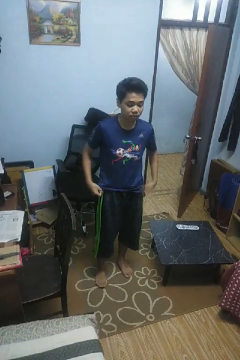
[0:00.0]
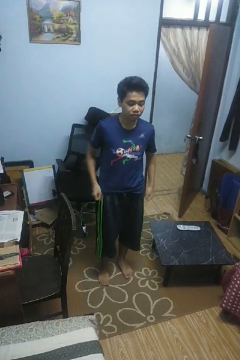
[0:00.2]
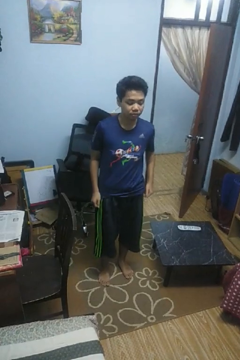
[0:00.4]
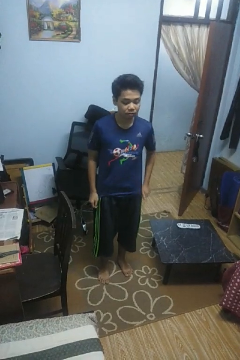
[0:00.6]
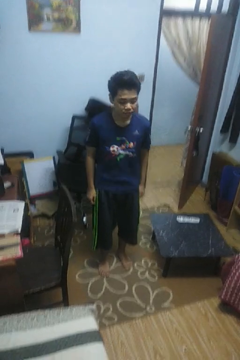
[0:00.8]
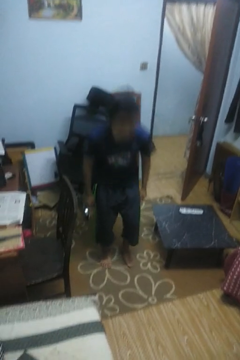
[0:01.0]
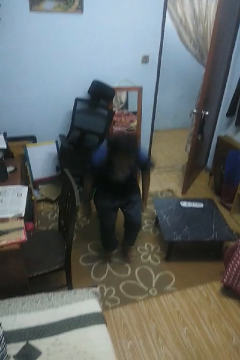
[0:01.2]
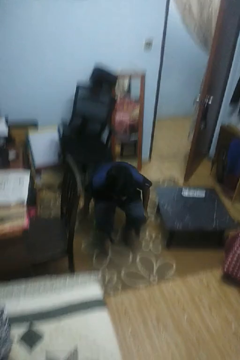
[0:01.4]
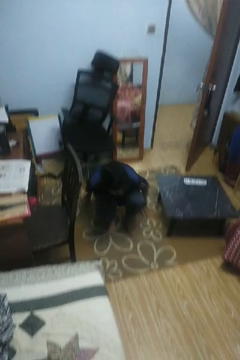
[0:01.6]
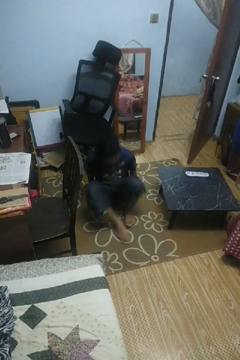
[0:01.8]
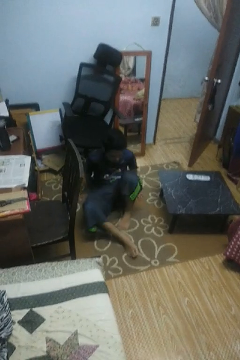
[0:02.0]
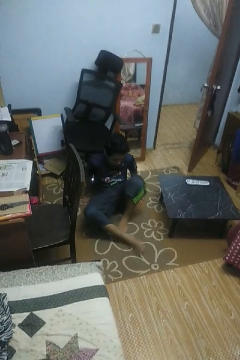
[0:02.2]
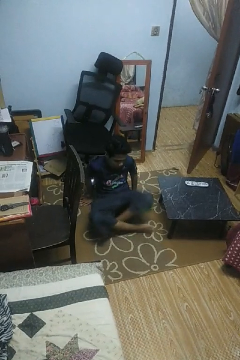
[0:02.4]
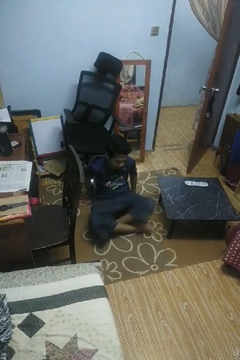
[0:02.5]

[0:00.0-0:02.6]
person sits crisscross

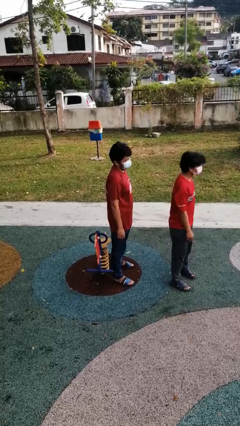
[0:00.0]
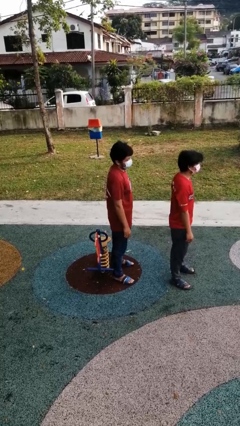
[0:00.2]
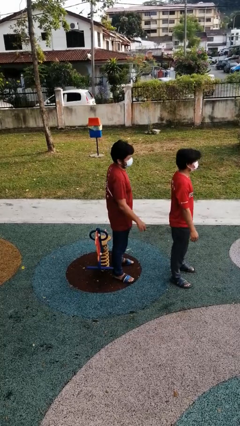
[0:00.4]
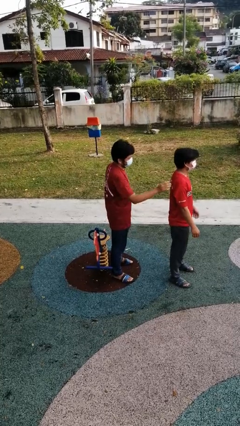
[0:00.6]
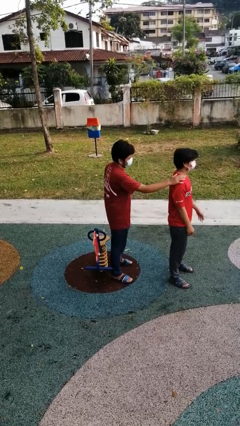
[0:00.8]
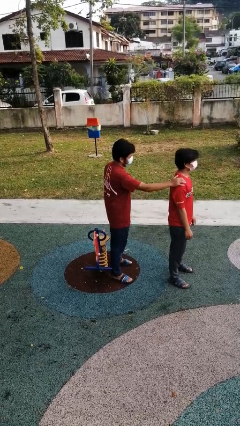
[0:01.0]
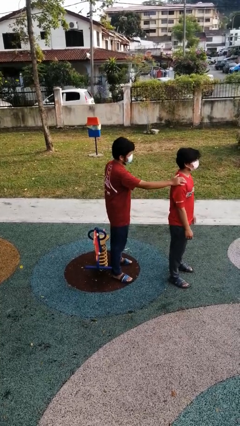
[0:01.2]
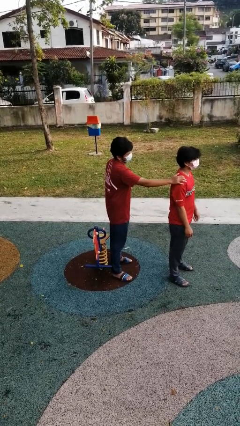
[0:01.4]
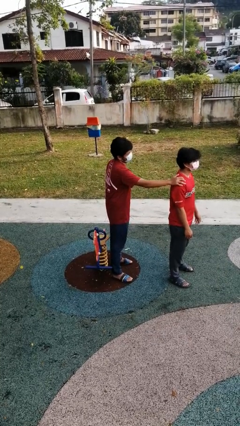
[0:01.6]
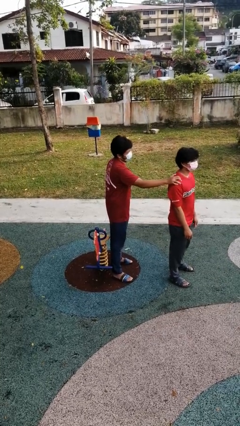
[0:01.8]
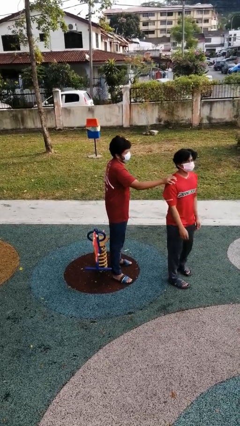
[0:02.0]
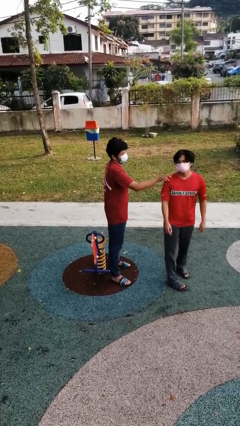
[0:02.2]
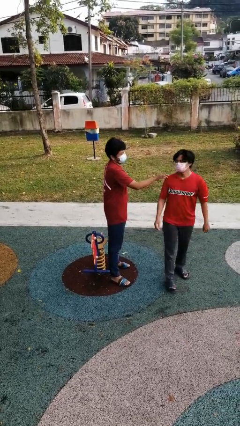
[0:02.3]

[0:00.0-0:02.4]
person grabs person by shoulder

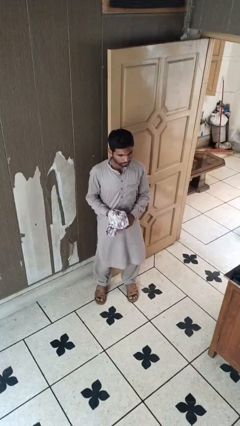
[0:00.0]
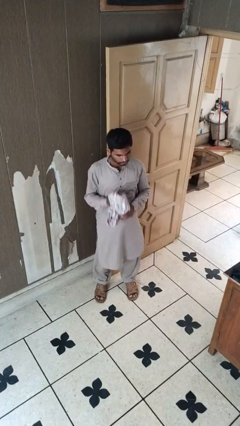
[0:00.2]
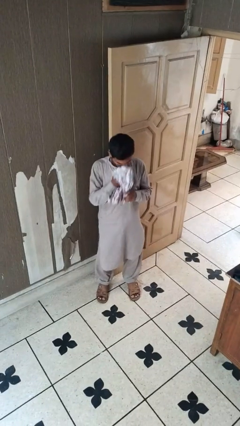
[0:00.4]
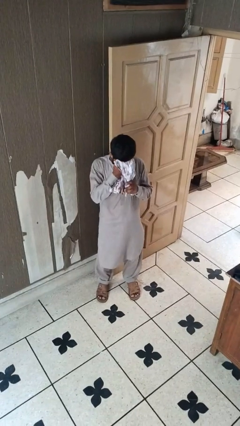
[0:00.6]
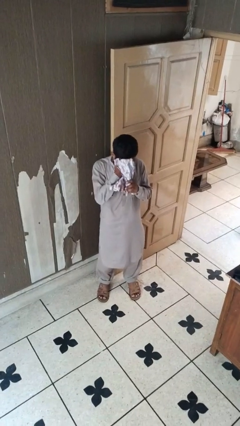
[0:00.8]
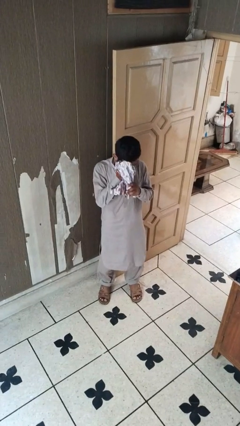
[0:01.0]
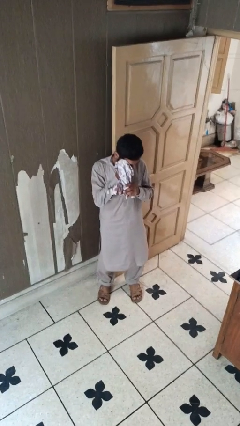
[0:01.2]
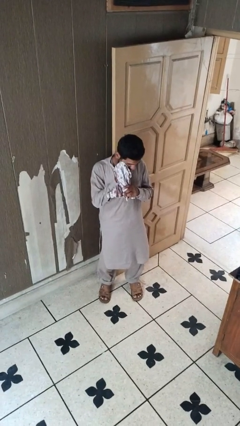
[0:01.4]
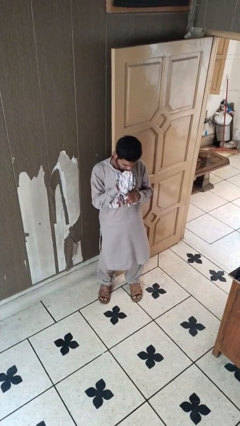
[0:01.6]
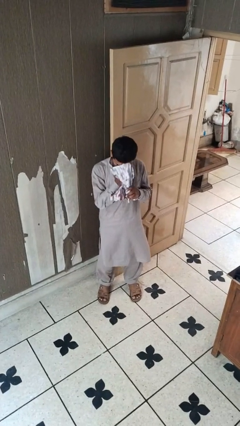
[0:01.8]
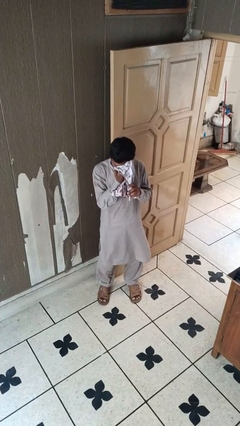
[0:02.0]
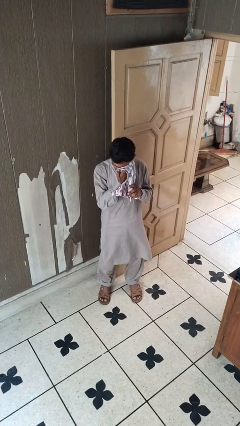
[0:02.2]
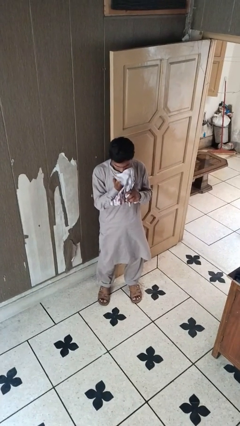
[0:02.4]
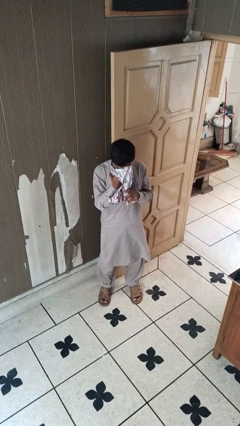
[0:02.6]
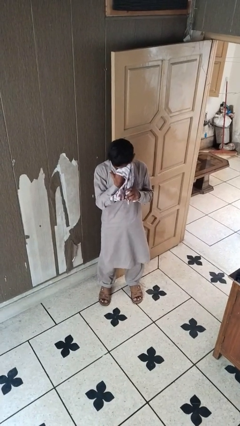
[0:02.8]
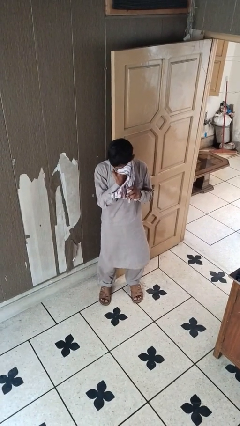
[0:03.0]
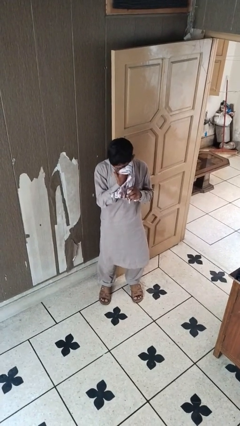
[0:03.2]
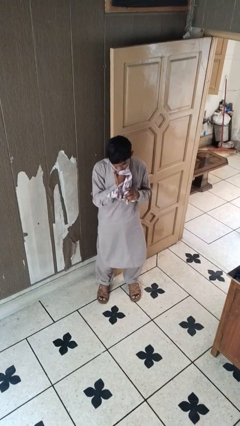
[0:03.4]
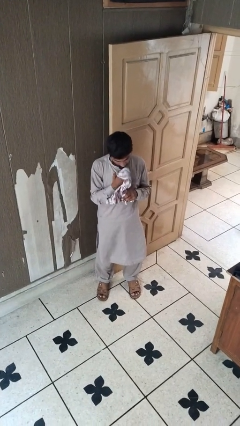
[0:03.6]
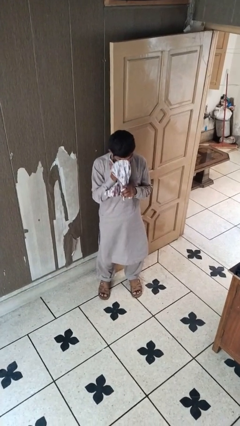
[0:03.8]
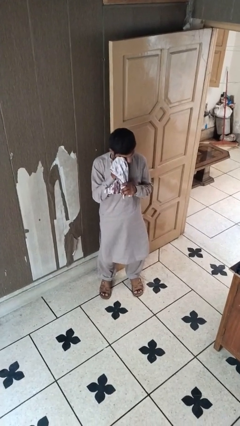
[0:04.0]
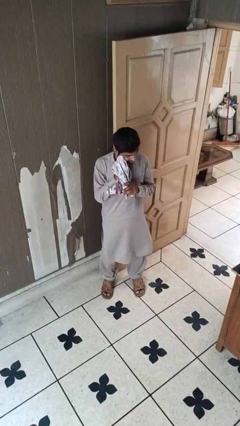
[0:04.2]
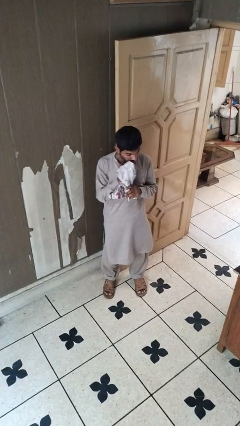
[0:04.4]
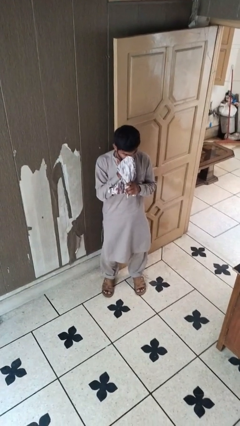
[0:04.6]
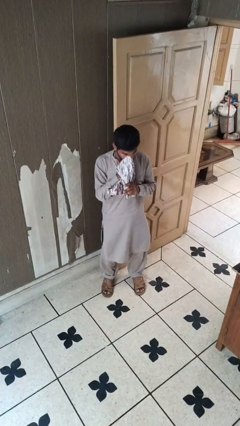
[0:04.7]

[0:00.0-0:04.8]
person wipes mouth with napkin

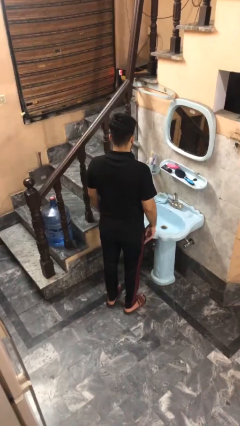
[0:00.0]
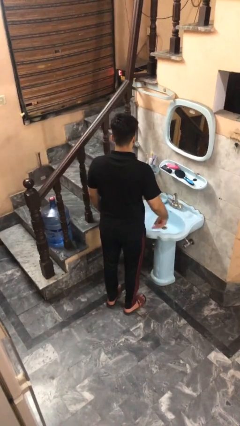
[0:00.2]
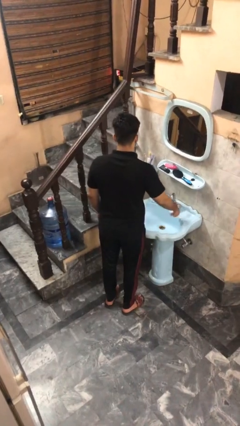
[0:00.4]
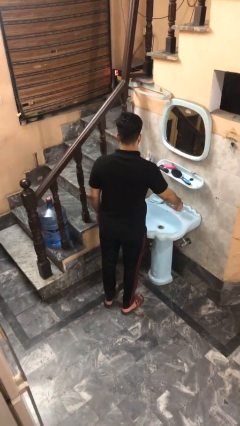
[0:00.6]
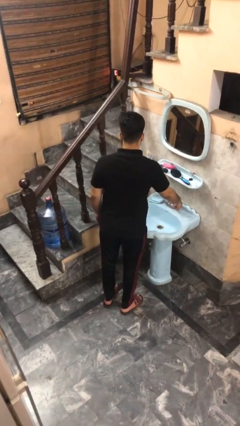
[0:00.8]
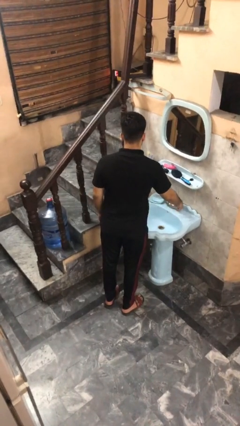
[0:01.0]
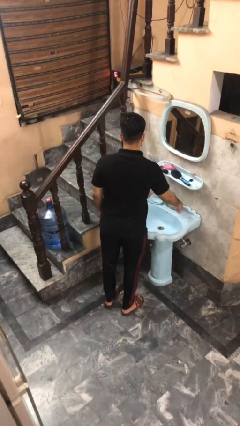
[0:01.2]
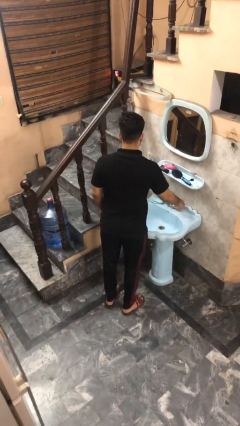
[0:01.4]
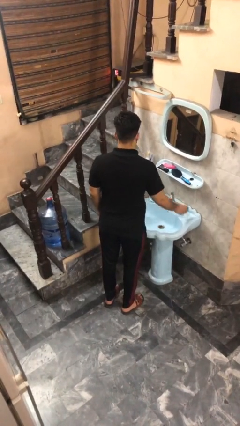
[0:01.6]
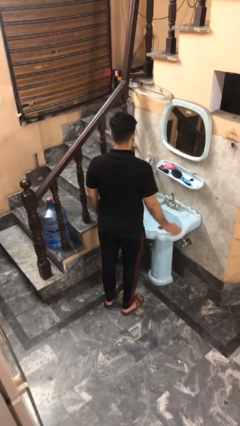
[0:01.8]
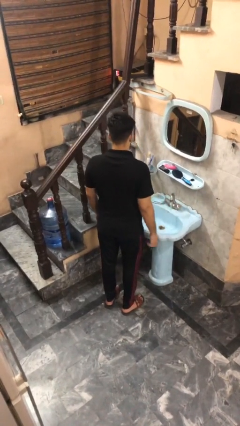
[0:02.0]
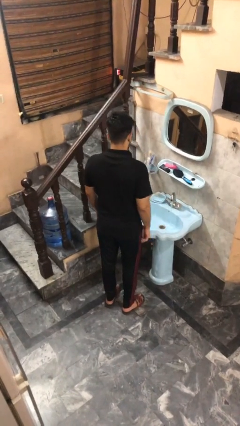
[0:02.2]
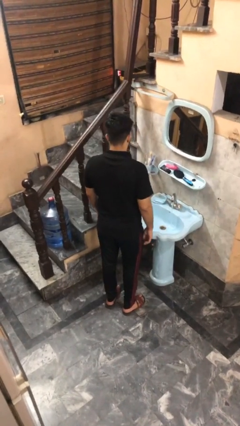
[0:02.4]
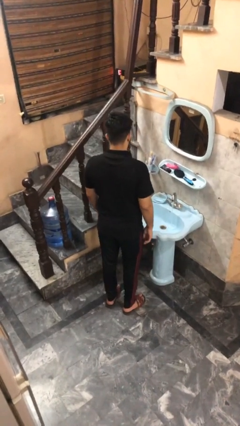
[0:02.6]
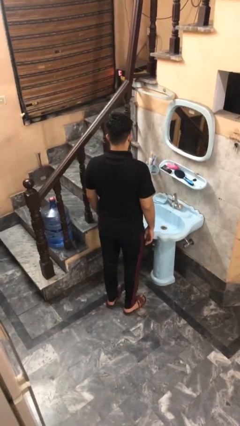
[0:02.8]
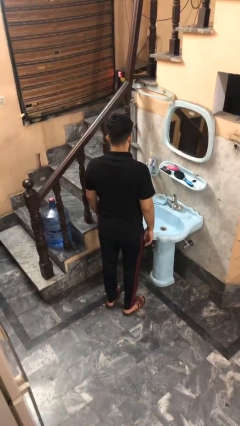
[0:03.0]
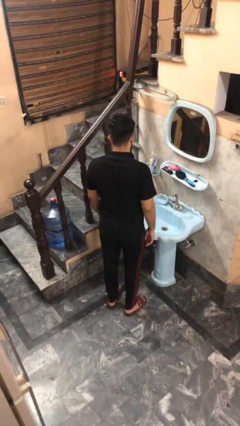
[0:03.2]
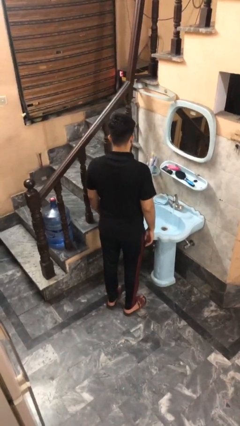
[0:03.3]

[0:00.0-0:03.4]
person turns on faucet

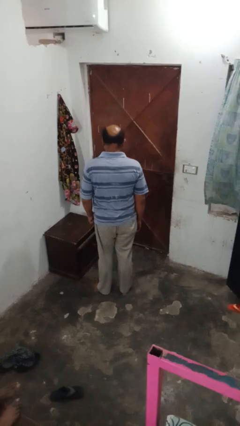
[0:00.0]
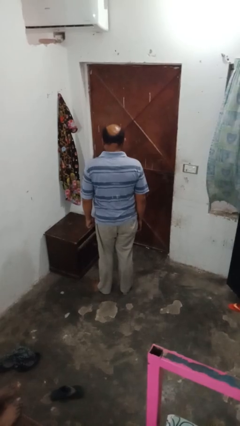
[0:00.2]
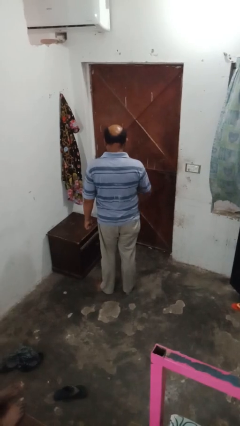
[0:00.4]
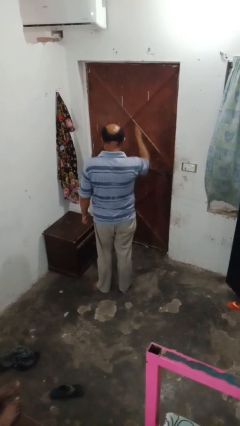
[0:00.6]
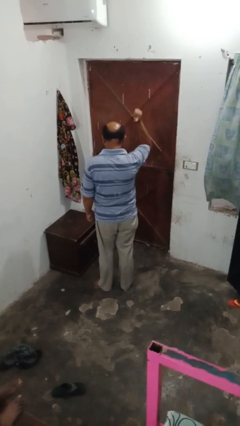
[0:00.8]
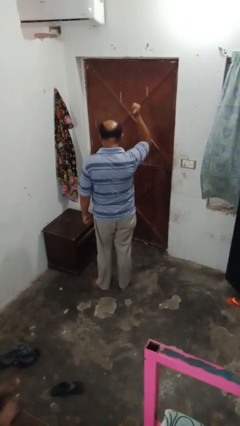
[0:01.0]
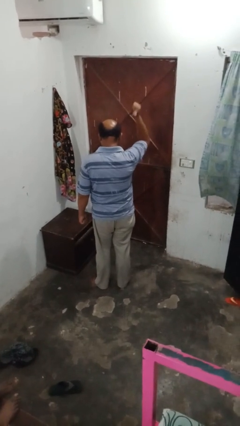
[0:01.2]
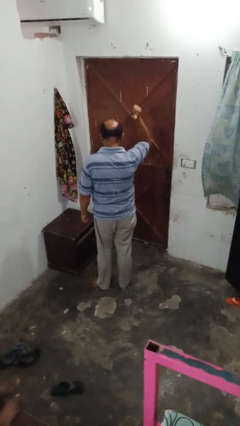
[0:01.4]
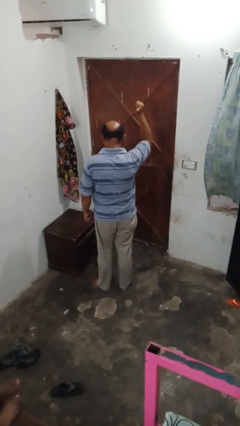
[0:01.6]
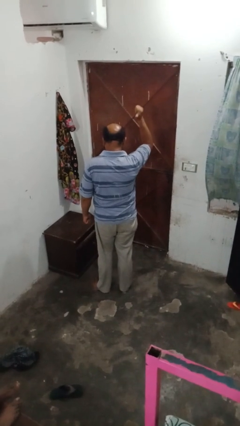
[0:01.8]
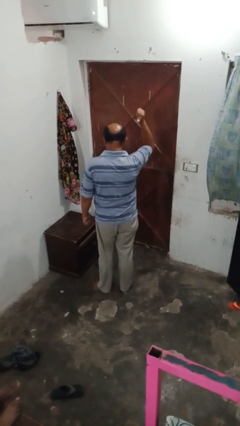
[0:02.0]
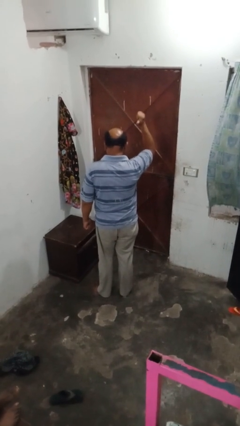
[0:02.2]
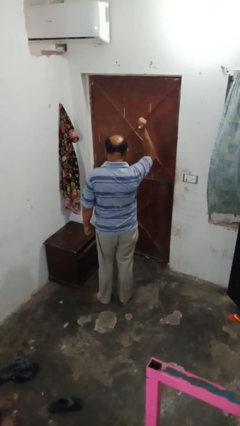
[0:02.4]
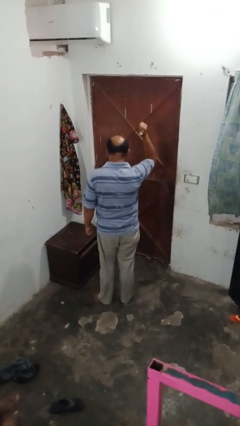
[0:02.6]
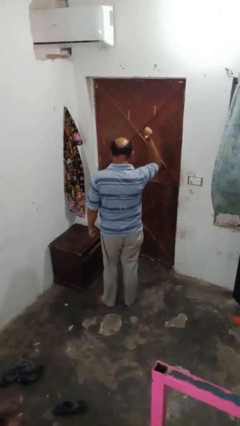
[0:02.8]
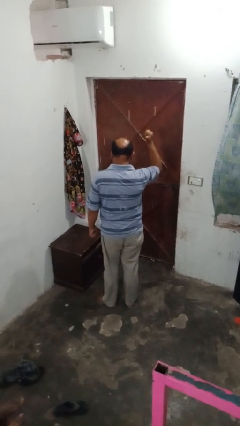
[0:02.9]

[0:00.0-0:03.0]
person gestures behind me

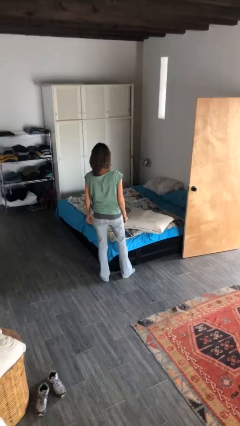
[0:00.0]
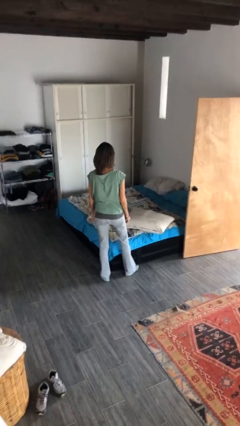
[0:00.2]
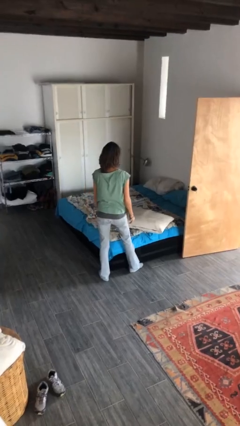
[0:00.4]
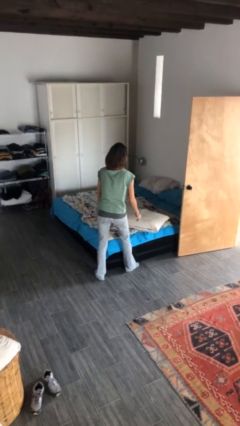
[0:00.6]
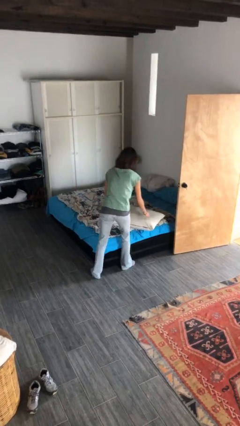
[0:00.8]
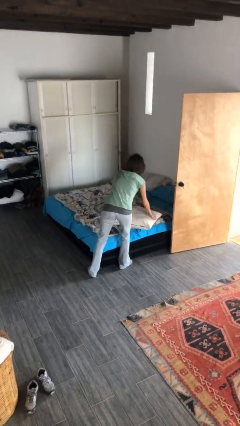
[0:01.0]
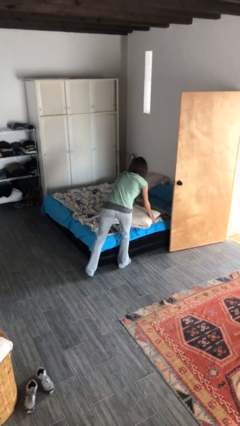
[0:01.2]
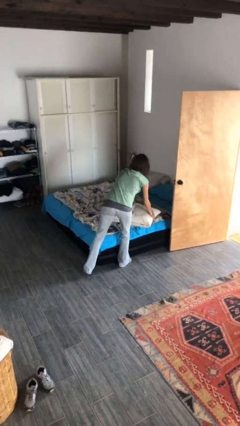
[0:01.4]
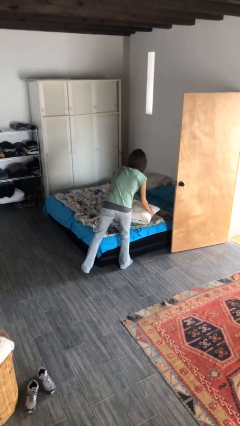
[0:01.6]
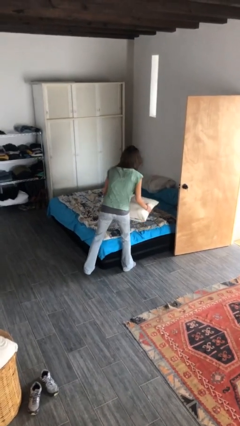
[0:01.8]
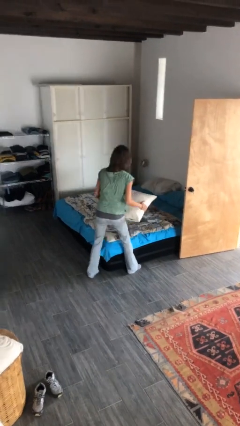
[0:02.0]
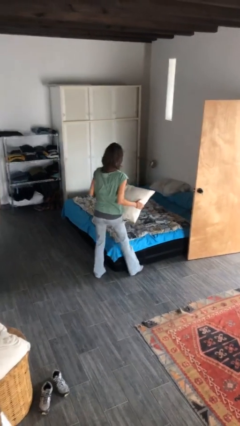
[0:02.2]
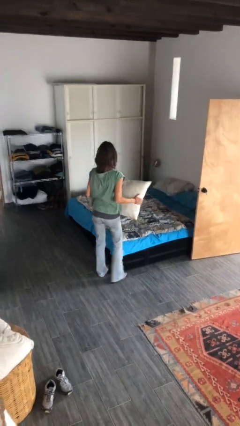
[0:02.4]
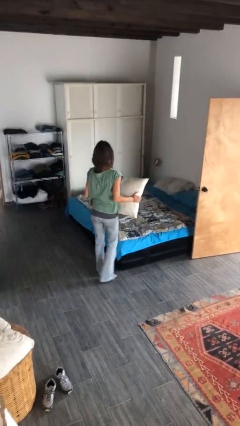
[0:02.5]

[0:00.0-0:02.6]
person picks up object from bed
